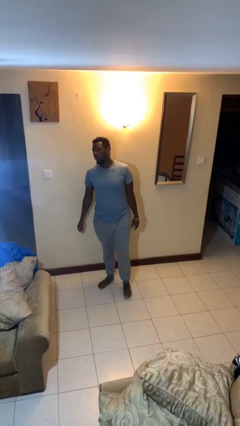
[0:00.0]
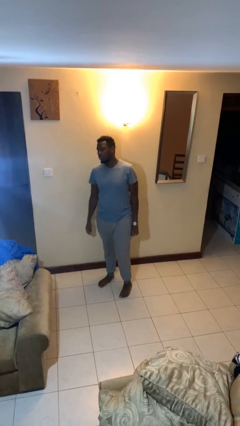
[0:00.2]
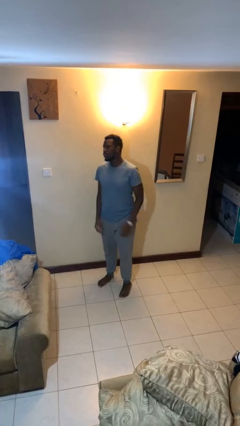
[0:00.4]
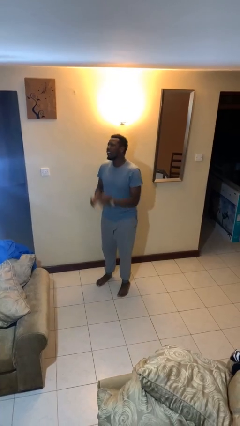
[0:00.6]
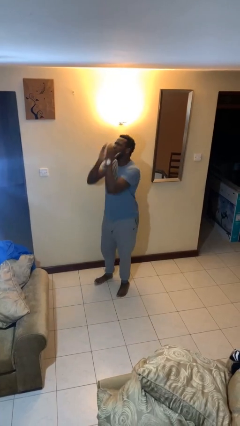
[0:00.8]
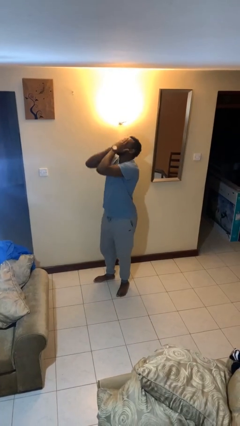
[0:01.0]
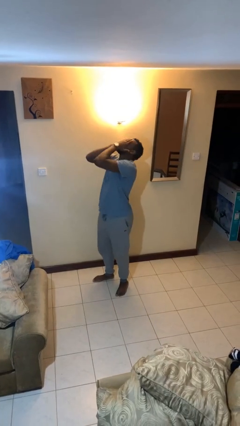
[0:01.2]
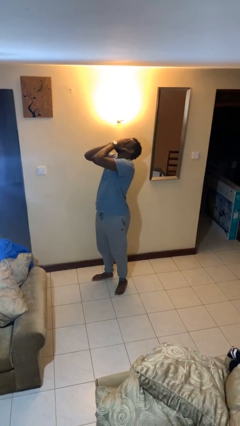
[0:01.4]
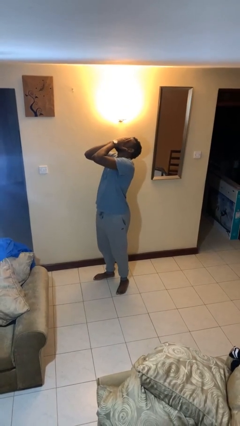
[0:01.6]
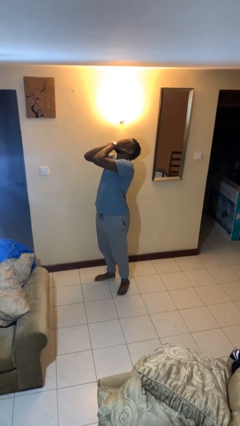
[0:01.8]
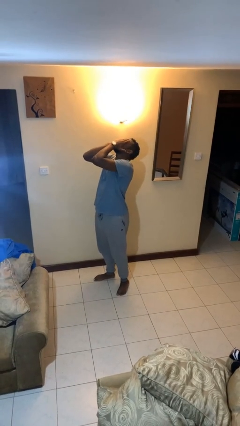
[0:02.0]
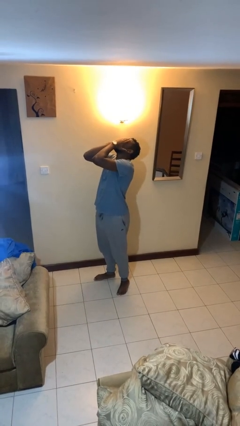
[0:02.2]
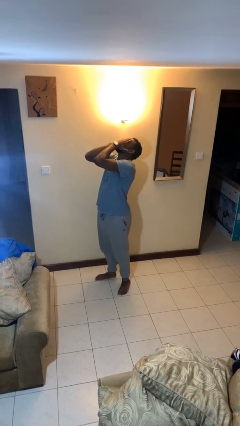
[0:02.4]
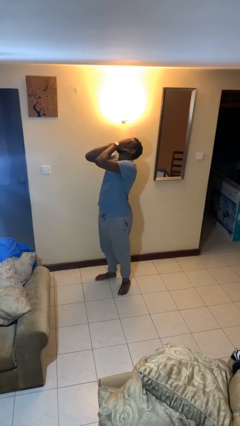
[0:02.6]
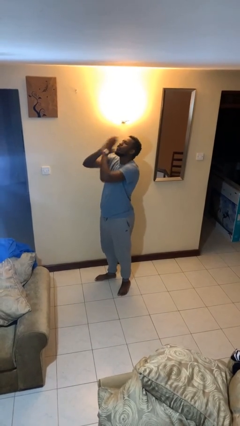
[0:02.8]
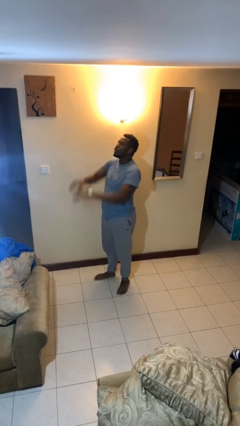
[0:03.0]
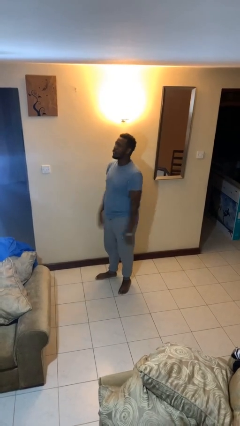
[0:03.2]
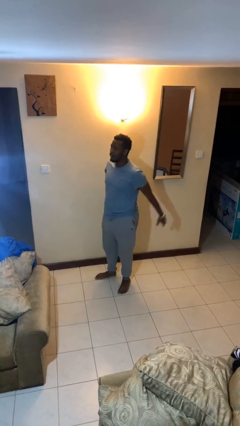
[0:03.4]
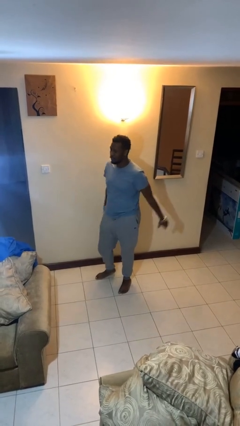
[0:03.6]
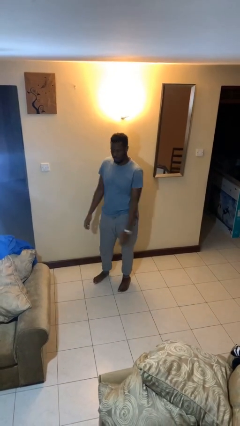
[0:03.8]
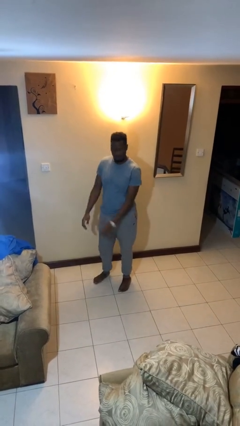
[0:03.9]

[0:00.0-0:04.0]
person covers face with hands

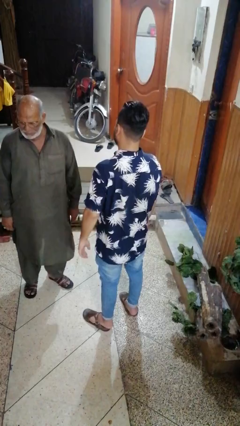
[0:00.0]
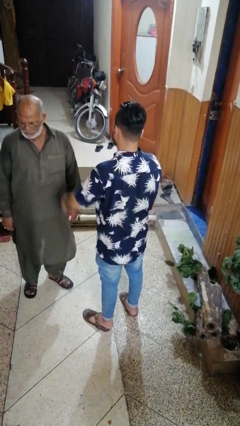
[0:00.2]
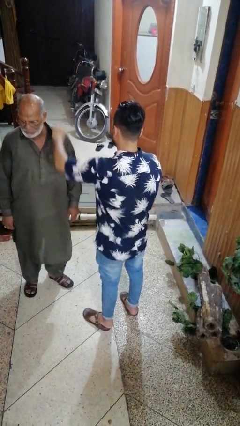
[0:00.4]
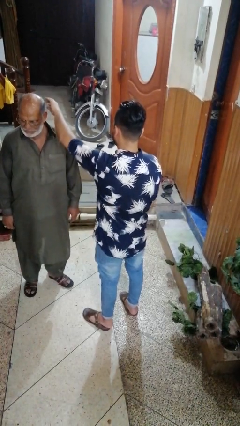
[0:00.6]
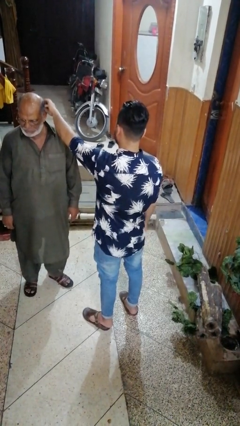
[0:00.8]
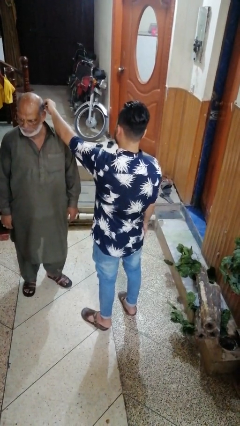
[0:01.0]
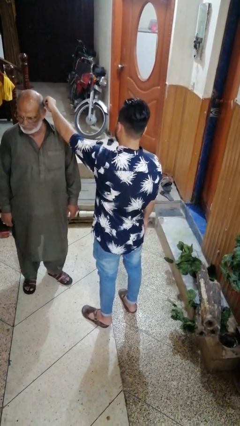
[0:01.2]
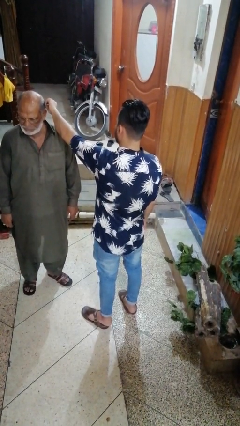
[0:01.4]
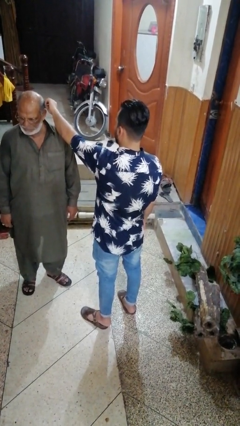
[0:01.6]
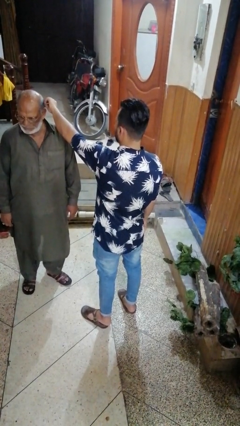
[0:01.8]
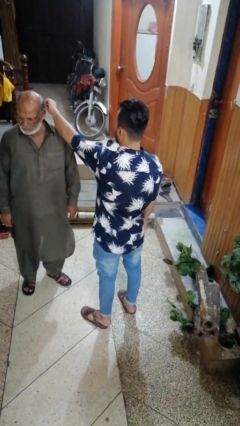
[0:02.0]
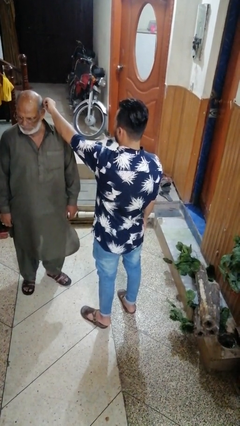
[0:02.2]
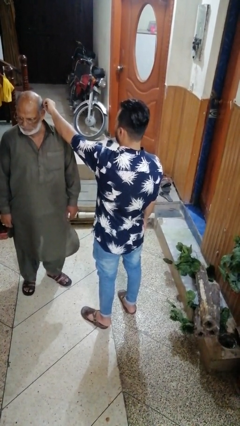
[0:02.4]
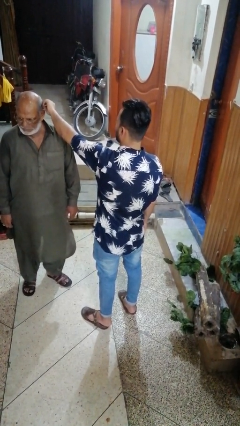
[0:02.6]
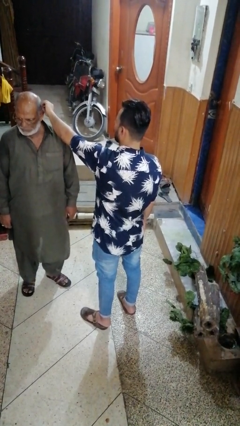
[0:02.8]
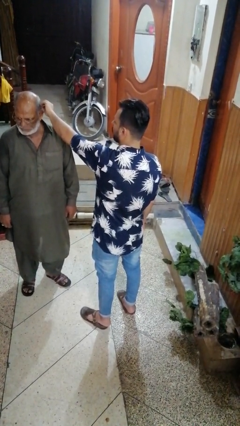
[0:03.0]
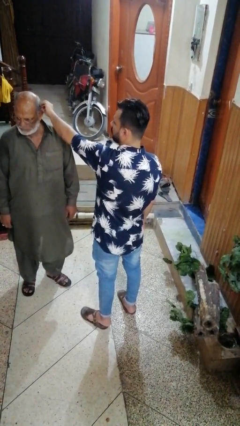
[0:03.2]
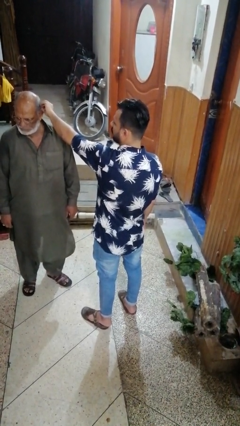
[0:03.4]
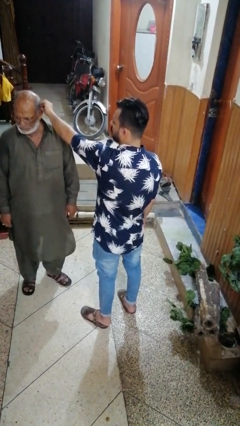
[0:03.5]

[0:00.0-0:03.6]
person grabs person by hair

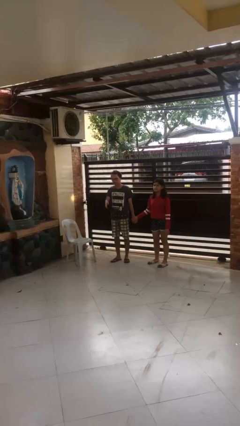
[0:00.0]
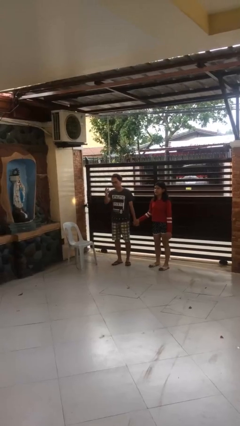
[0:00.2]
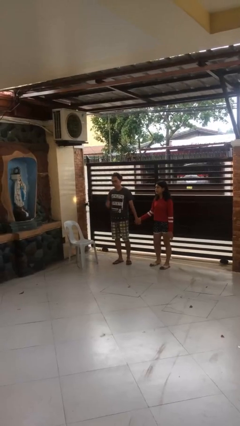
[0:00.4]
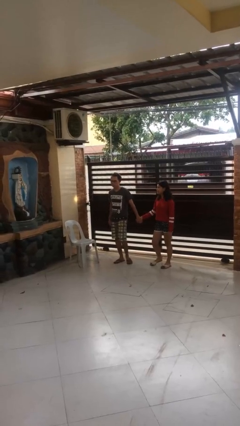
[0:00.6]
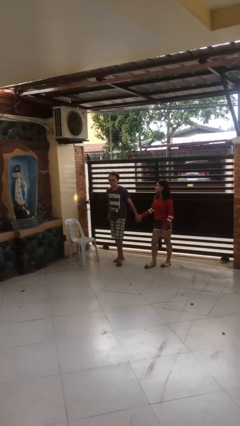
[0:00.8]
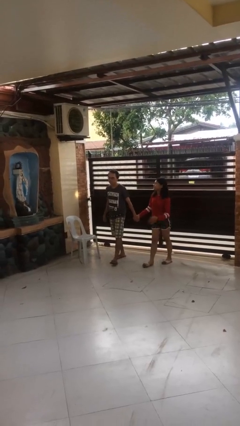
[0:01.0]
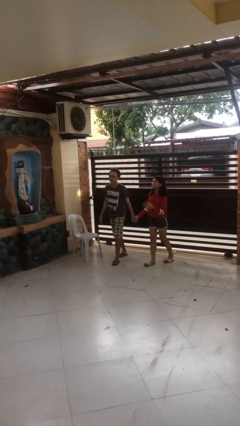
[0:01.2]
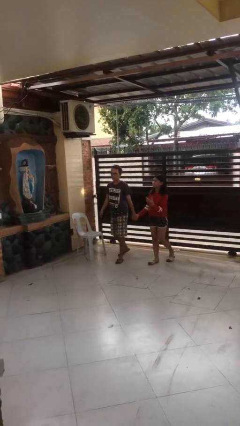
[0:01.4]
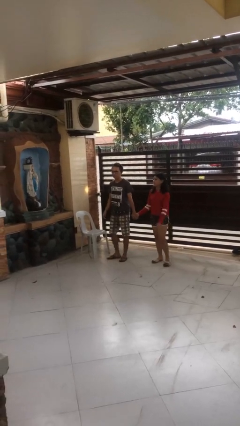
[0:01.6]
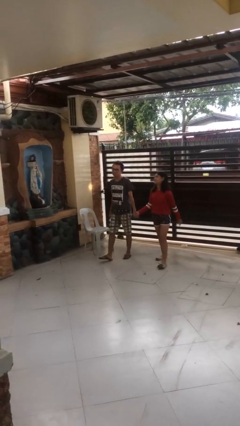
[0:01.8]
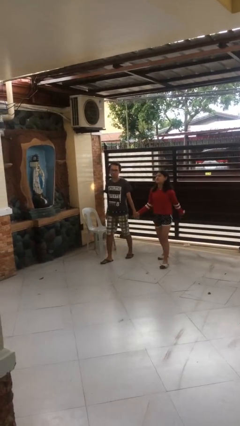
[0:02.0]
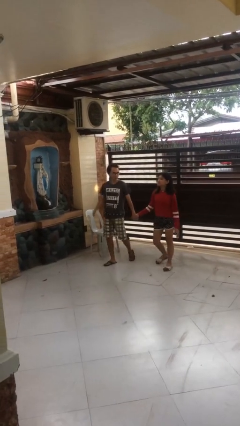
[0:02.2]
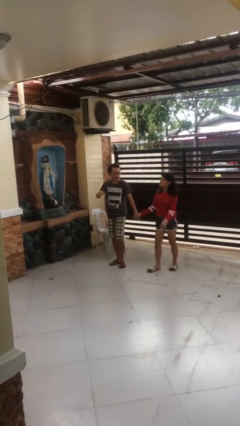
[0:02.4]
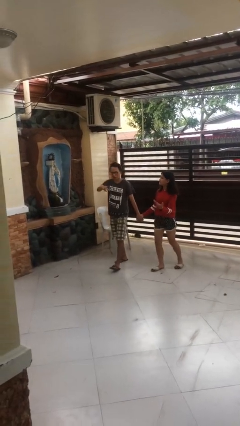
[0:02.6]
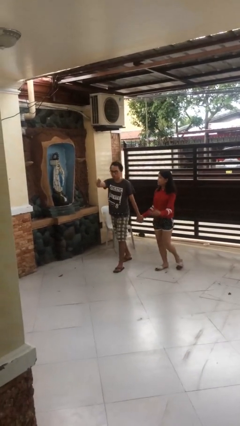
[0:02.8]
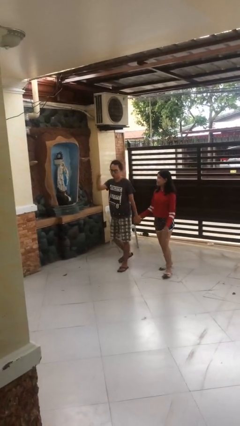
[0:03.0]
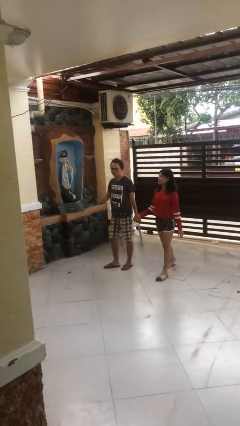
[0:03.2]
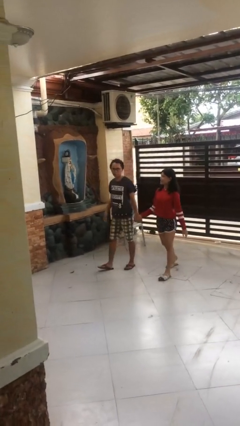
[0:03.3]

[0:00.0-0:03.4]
person holds hand

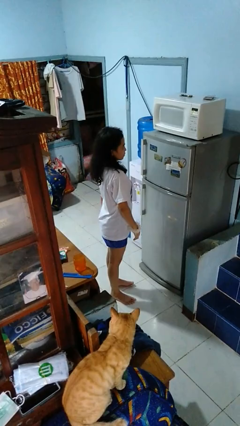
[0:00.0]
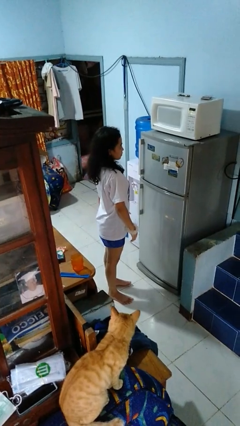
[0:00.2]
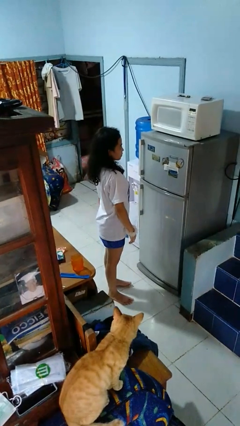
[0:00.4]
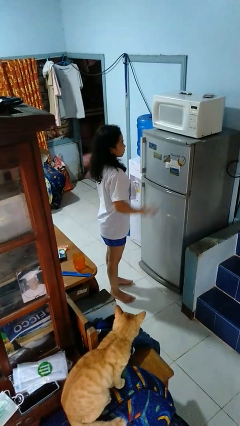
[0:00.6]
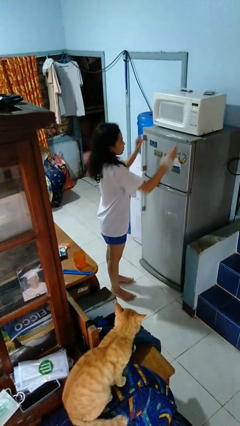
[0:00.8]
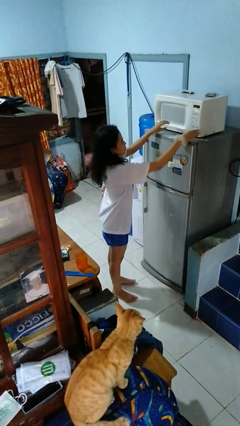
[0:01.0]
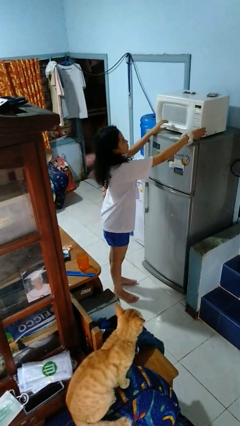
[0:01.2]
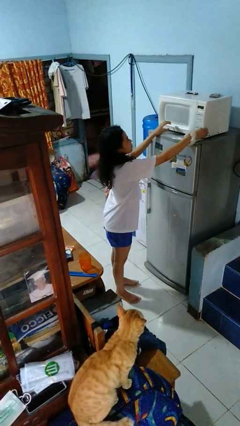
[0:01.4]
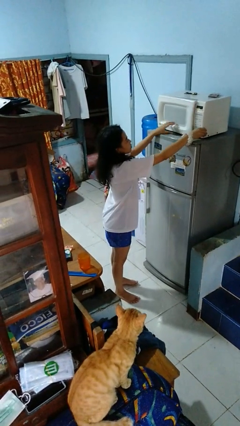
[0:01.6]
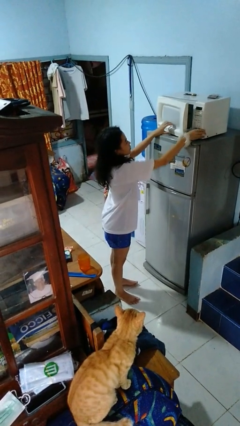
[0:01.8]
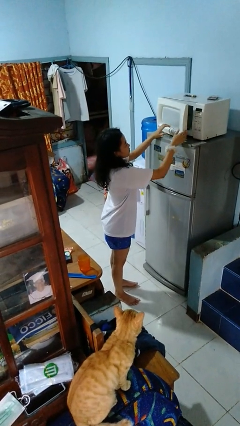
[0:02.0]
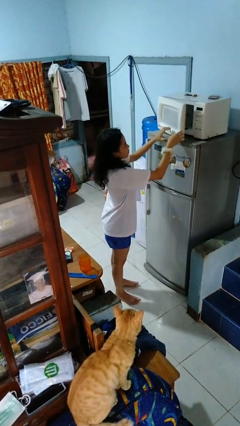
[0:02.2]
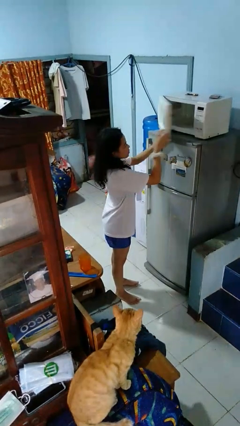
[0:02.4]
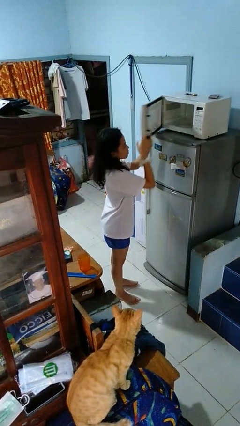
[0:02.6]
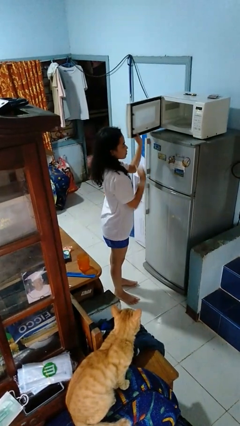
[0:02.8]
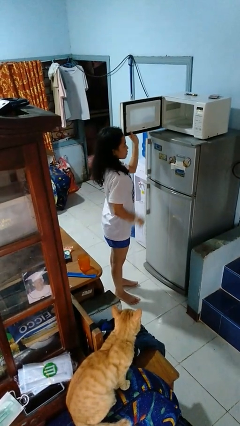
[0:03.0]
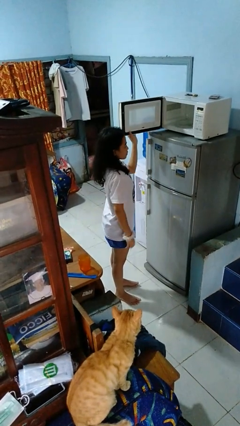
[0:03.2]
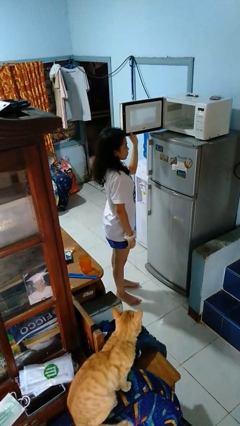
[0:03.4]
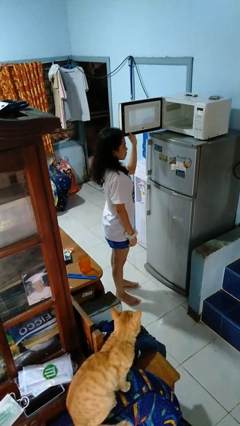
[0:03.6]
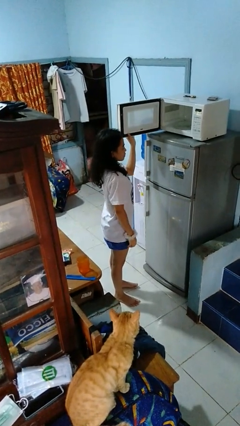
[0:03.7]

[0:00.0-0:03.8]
person opens microwave

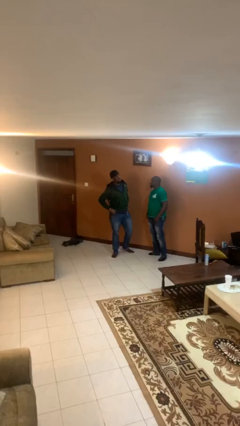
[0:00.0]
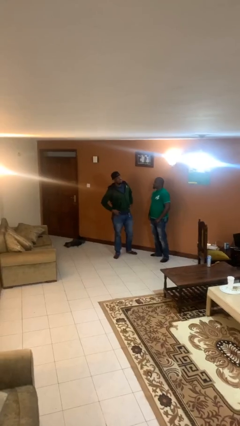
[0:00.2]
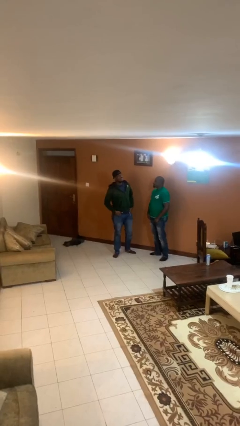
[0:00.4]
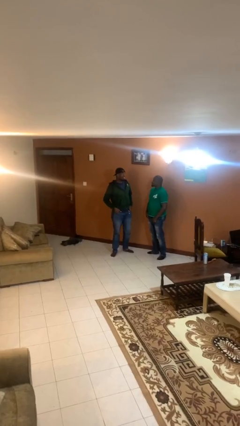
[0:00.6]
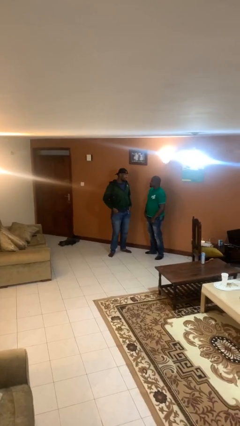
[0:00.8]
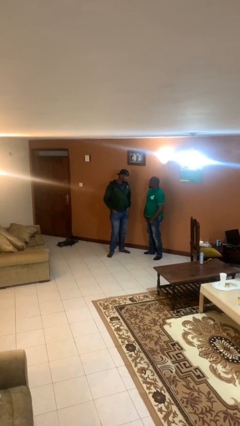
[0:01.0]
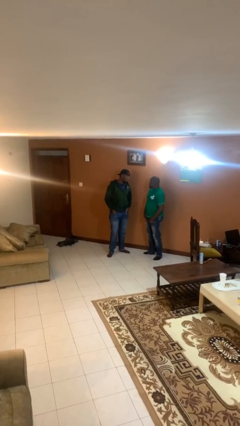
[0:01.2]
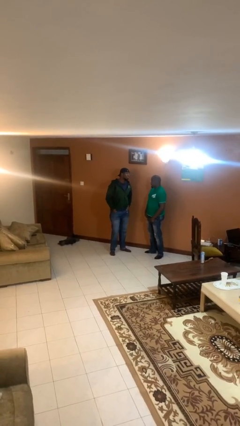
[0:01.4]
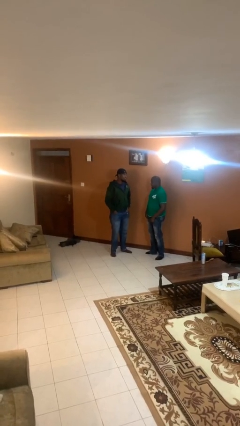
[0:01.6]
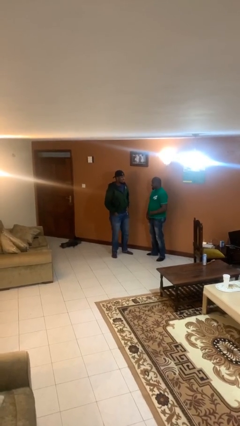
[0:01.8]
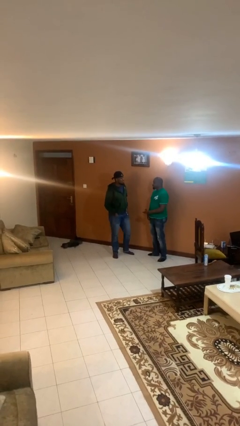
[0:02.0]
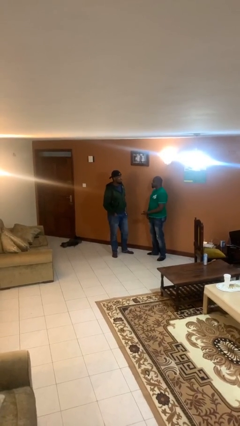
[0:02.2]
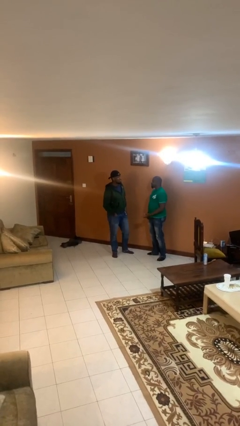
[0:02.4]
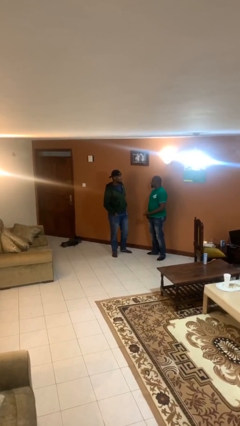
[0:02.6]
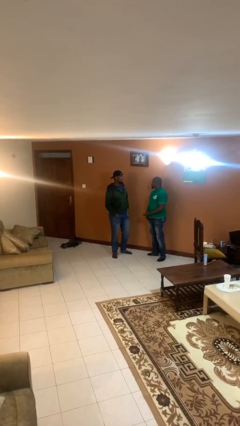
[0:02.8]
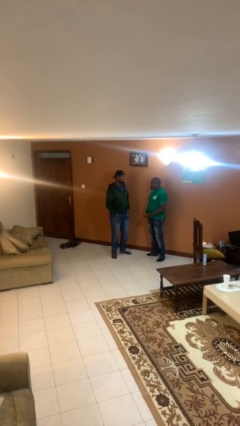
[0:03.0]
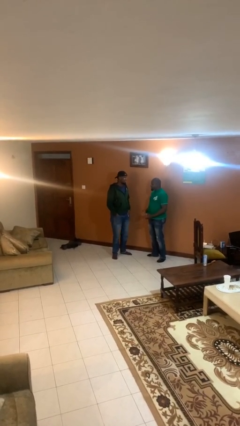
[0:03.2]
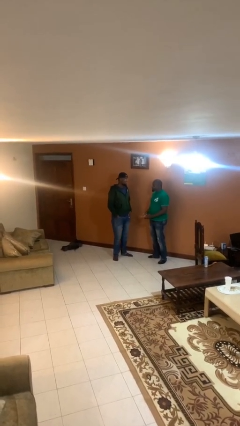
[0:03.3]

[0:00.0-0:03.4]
person talks to person
